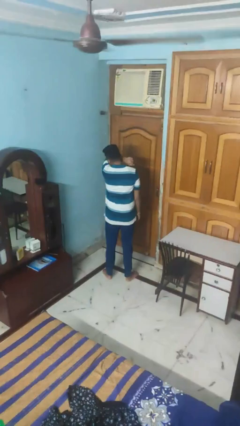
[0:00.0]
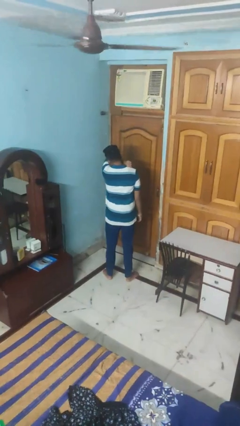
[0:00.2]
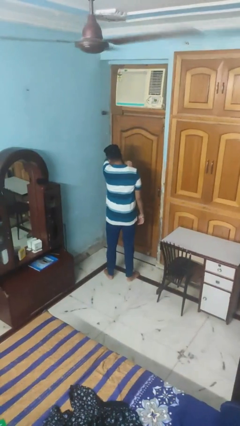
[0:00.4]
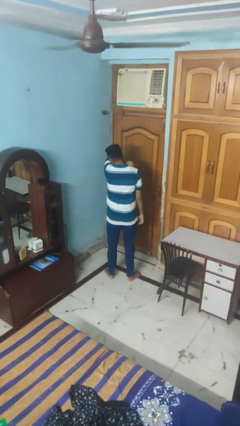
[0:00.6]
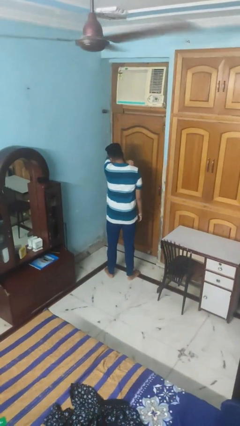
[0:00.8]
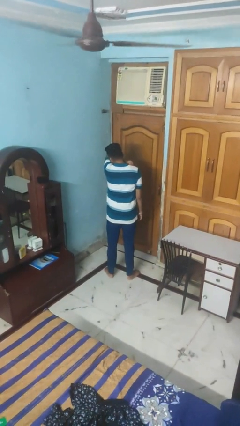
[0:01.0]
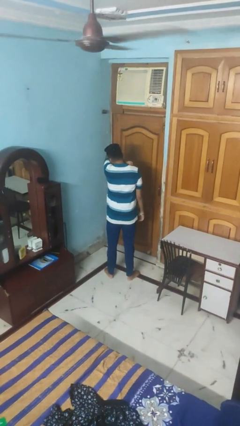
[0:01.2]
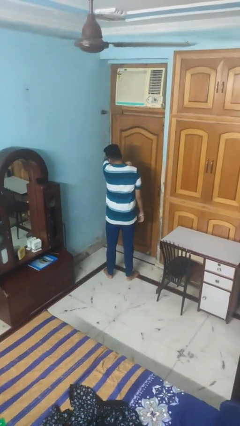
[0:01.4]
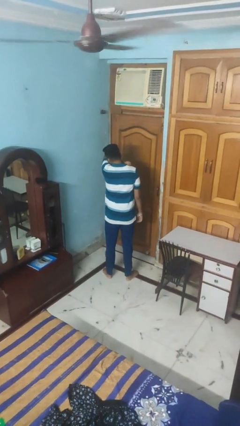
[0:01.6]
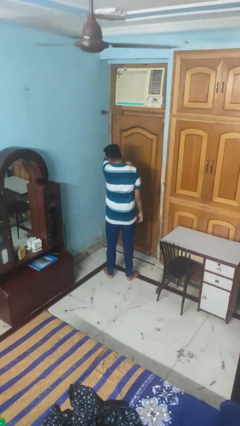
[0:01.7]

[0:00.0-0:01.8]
person sneezes into arm

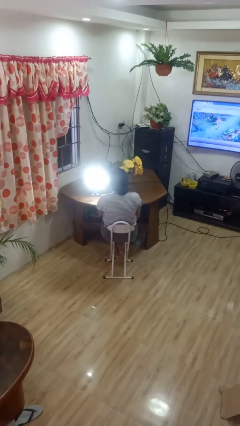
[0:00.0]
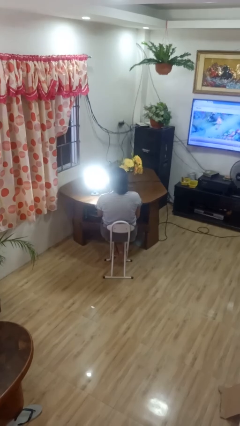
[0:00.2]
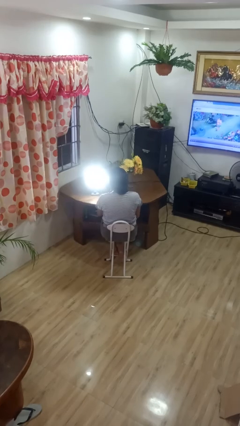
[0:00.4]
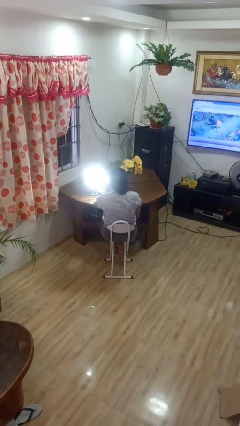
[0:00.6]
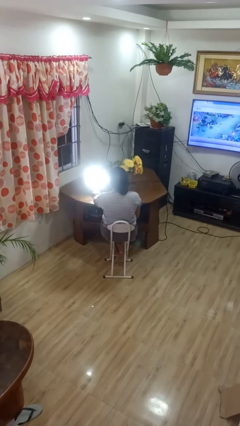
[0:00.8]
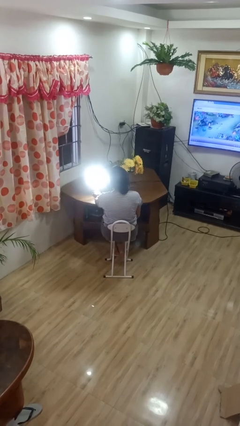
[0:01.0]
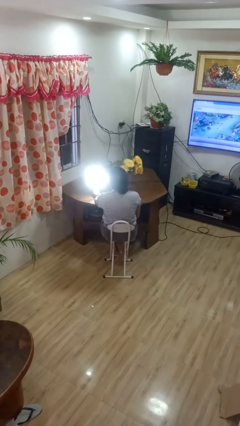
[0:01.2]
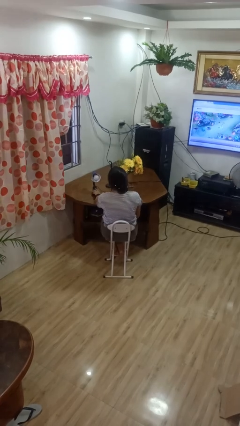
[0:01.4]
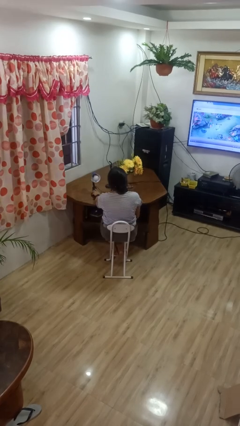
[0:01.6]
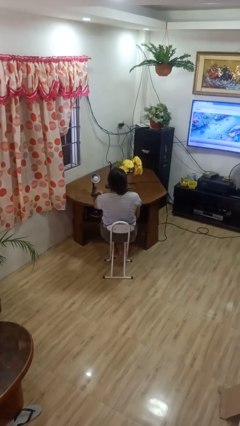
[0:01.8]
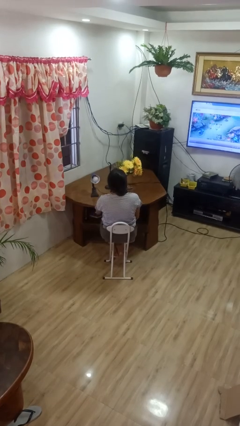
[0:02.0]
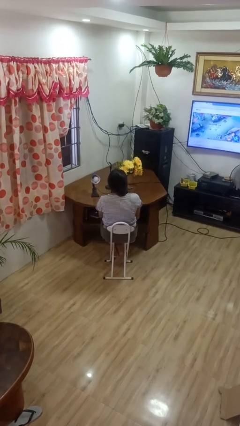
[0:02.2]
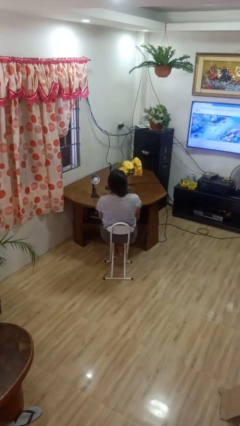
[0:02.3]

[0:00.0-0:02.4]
person turns off lamp

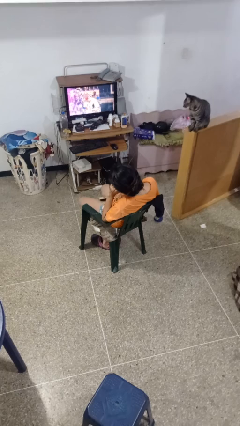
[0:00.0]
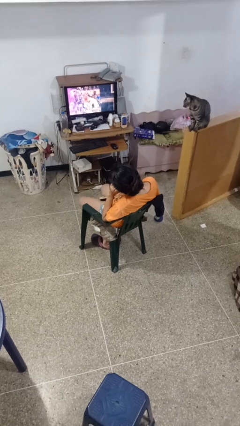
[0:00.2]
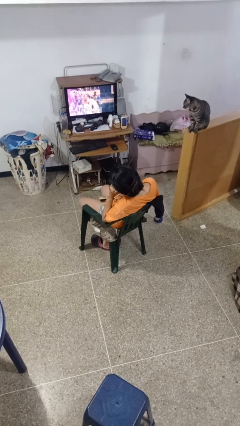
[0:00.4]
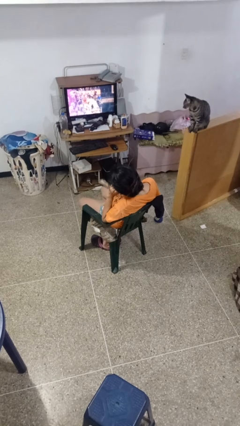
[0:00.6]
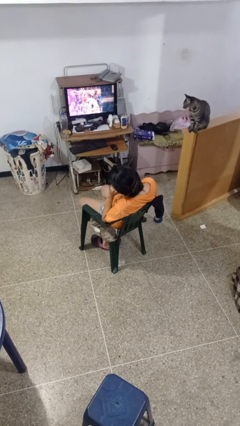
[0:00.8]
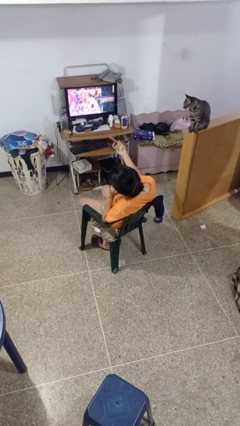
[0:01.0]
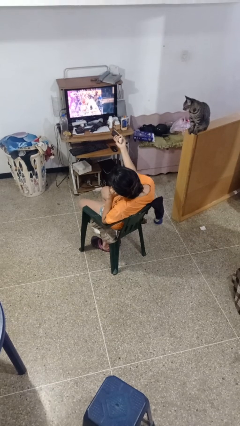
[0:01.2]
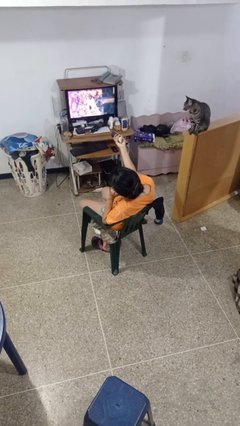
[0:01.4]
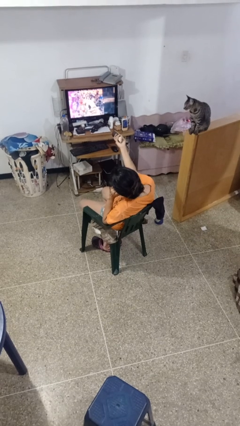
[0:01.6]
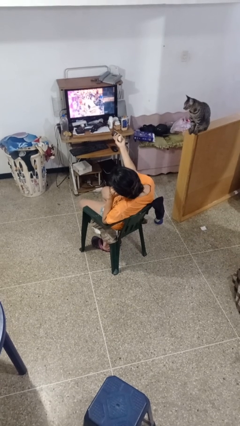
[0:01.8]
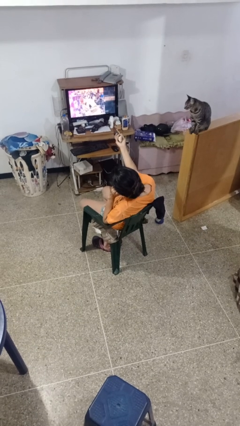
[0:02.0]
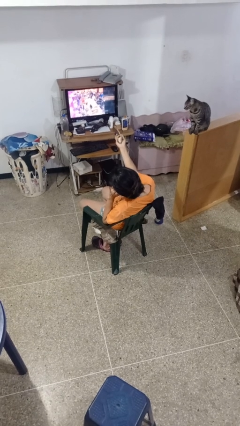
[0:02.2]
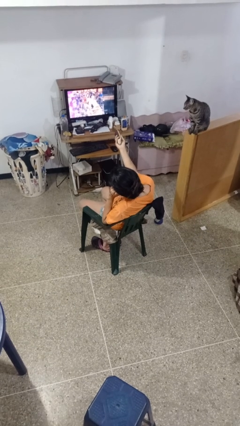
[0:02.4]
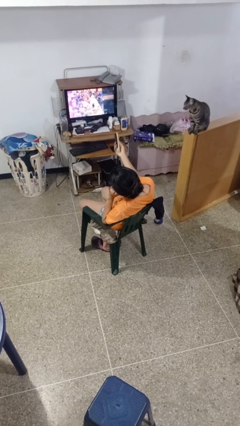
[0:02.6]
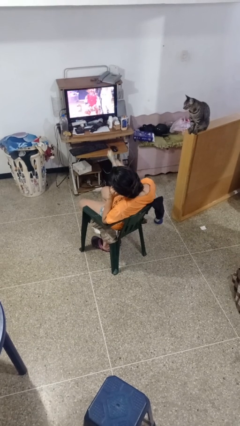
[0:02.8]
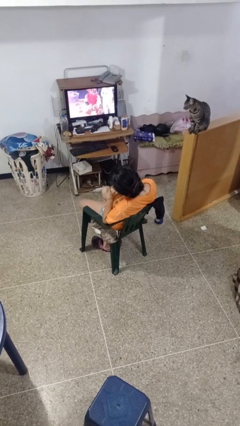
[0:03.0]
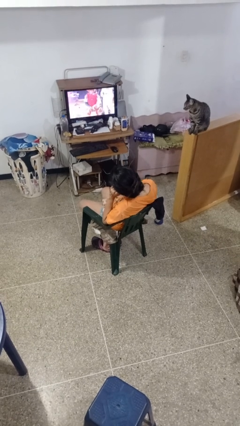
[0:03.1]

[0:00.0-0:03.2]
person uses television remote

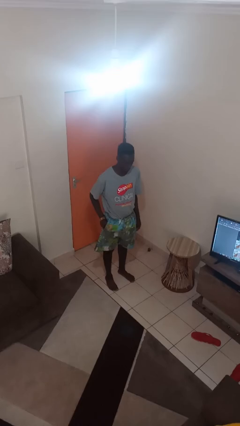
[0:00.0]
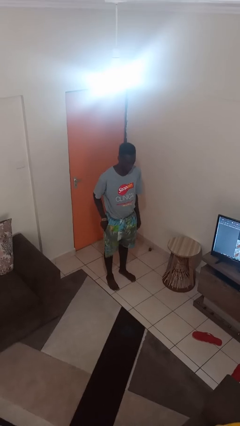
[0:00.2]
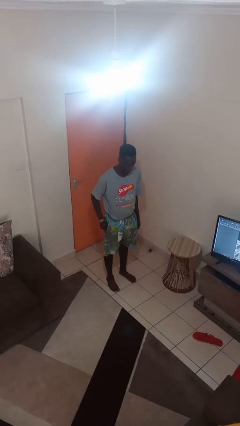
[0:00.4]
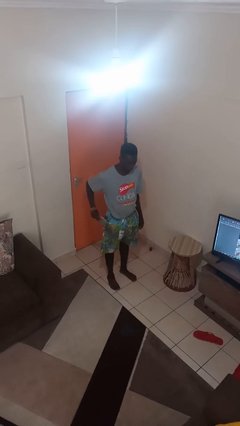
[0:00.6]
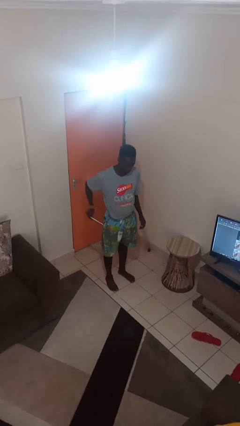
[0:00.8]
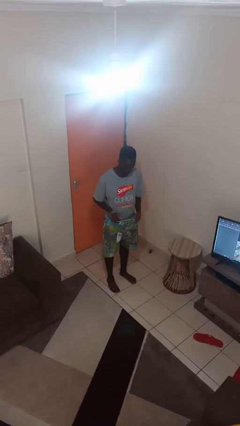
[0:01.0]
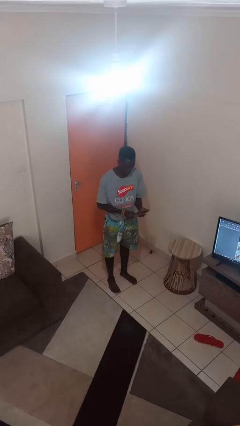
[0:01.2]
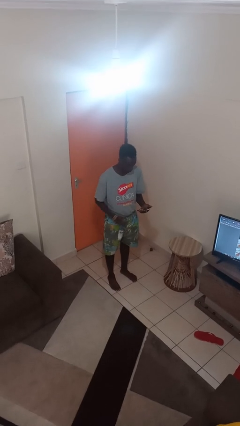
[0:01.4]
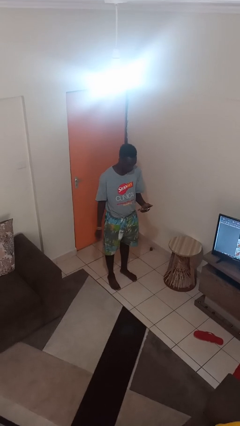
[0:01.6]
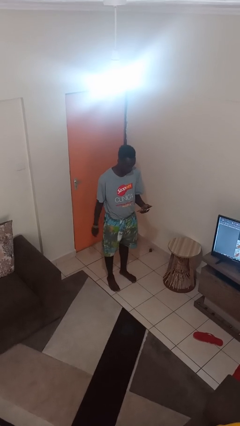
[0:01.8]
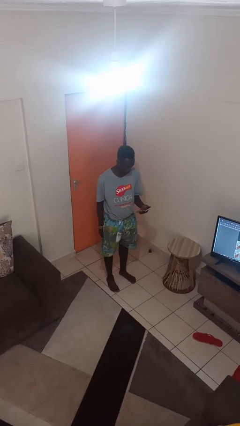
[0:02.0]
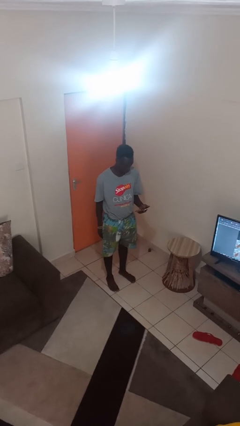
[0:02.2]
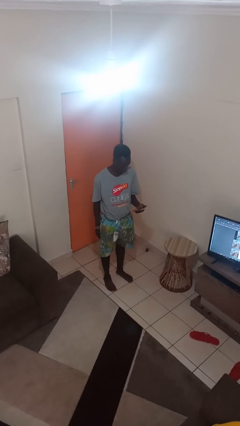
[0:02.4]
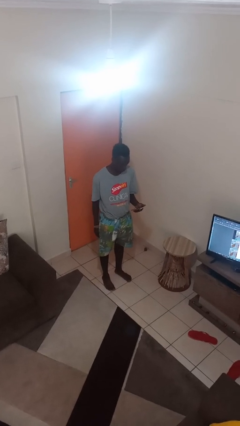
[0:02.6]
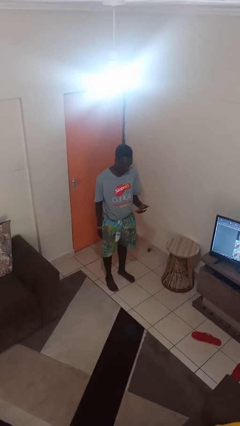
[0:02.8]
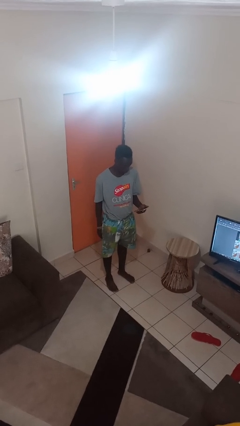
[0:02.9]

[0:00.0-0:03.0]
person takes phone from pocket

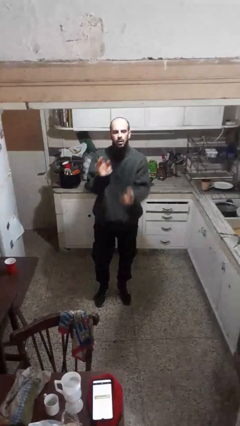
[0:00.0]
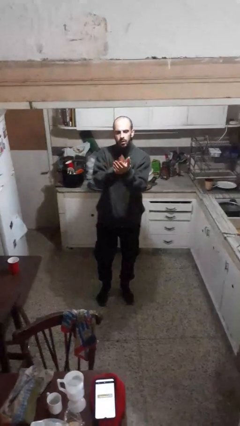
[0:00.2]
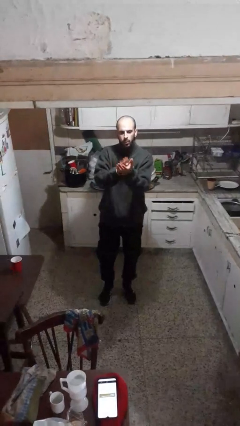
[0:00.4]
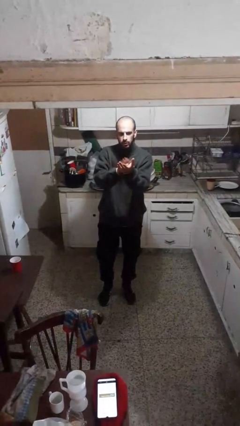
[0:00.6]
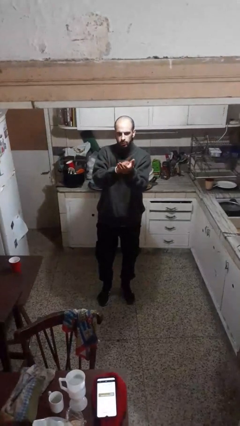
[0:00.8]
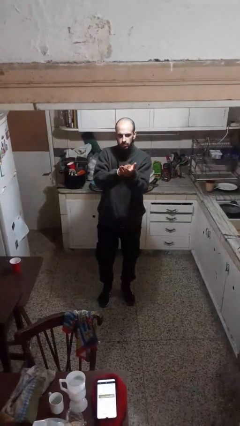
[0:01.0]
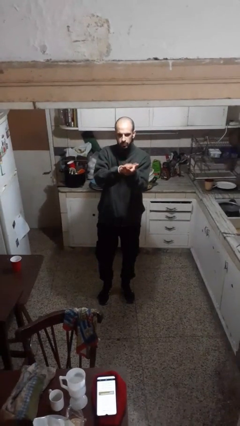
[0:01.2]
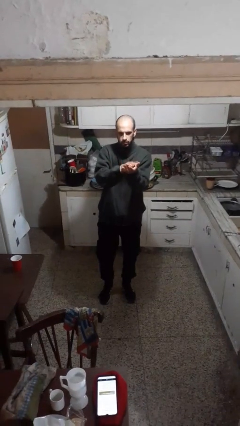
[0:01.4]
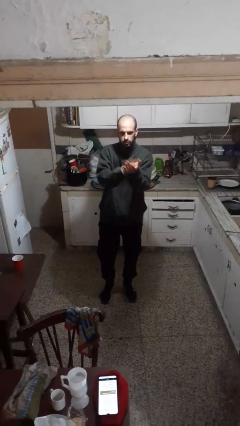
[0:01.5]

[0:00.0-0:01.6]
person claps hands

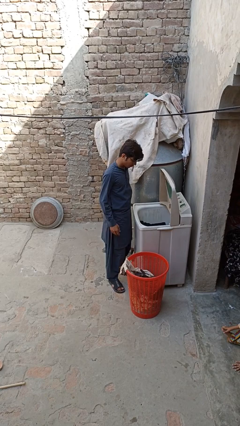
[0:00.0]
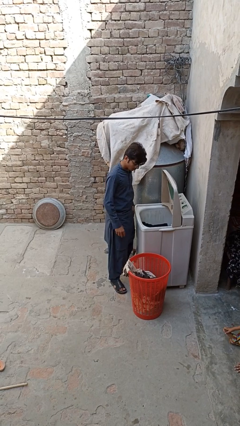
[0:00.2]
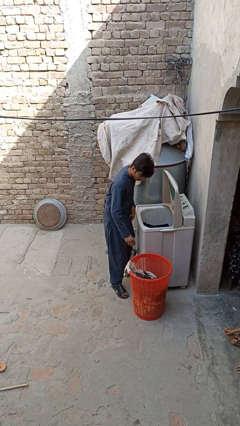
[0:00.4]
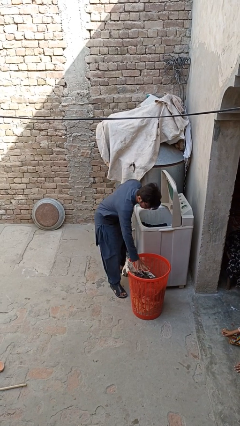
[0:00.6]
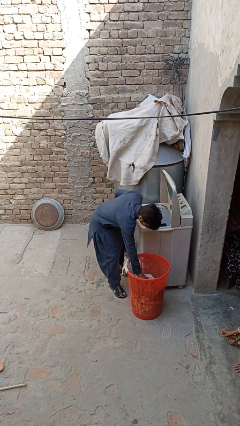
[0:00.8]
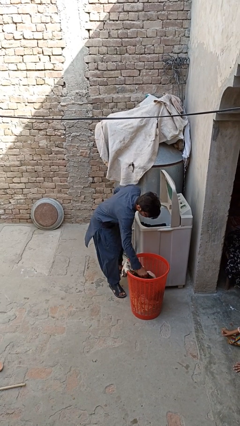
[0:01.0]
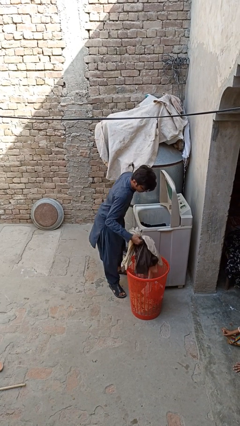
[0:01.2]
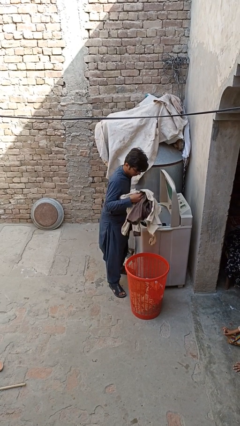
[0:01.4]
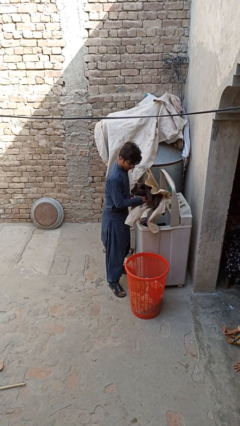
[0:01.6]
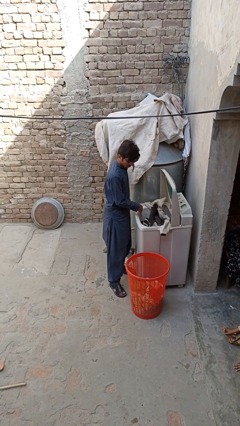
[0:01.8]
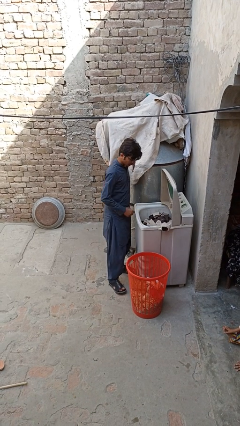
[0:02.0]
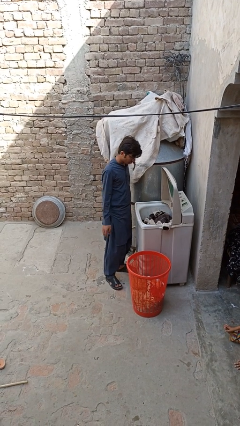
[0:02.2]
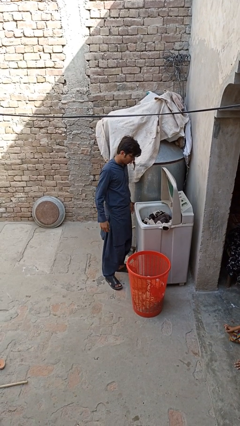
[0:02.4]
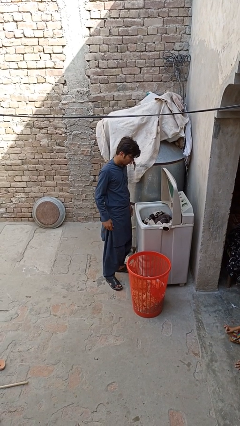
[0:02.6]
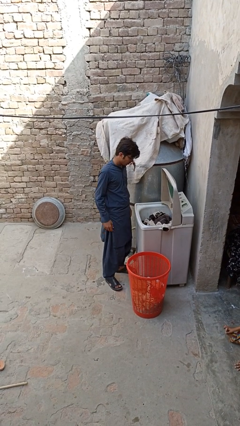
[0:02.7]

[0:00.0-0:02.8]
person loads clotheswasher

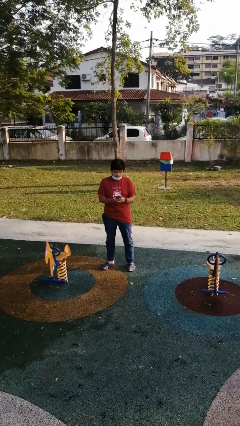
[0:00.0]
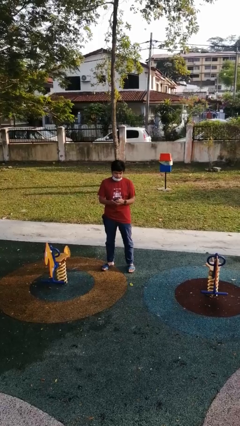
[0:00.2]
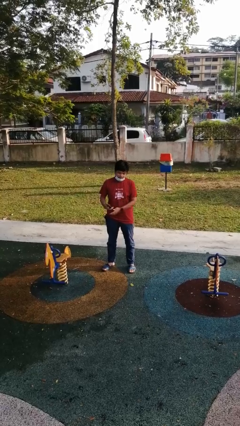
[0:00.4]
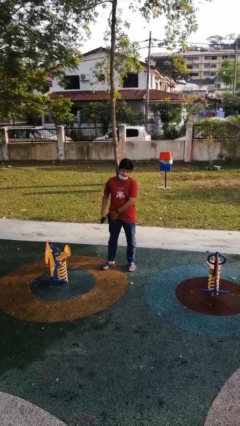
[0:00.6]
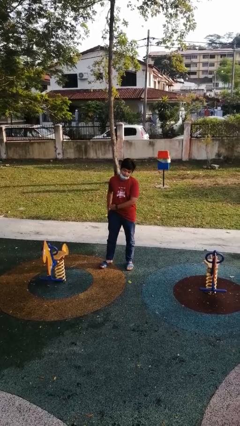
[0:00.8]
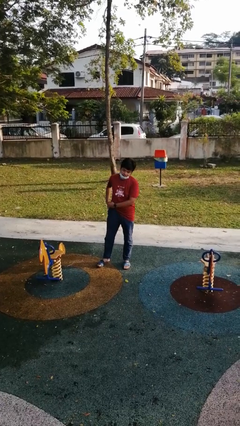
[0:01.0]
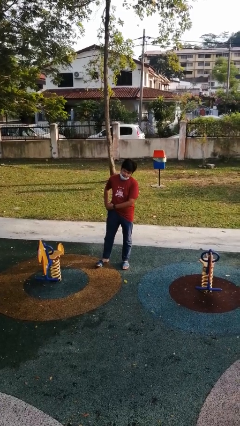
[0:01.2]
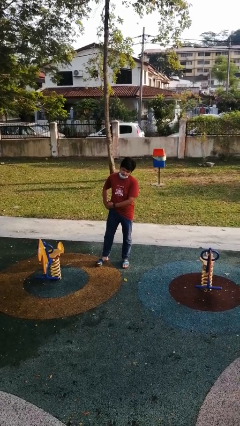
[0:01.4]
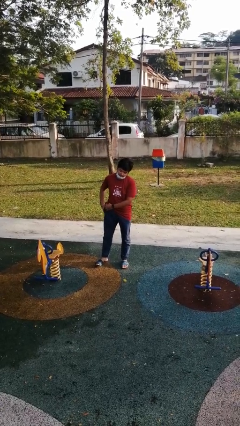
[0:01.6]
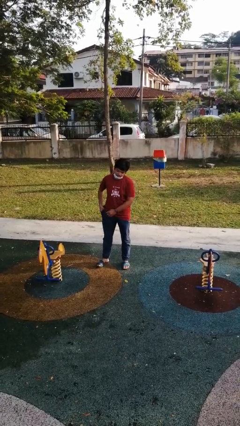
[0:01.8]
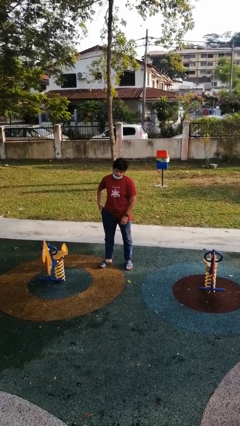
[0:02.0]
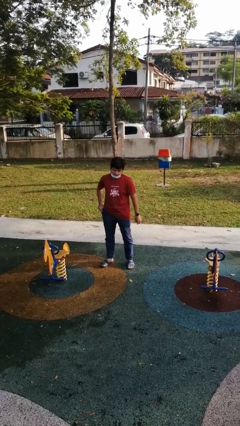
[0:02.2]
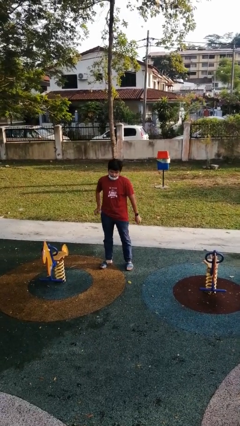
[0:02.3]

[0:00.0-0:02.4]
person puts phone into pocket
